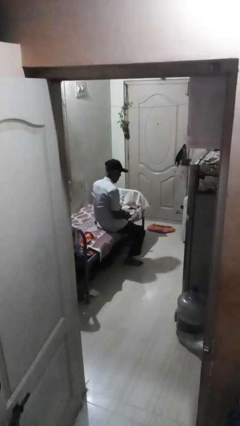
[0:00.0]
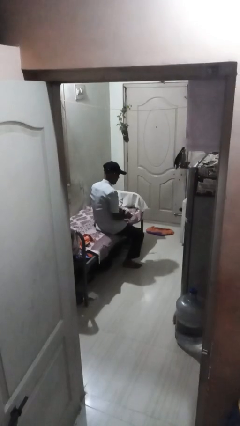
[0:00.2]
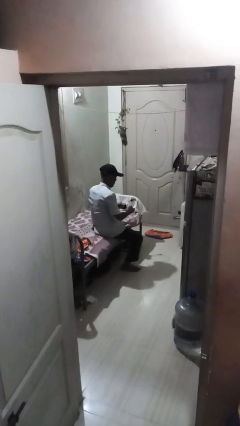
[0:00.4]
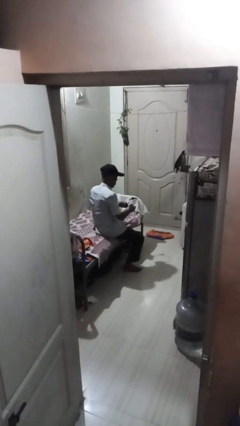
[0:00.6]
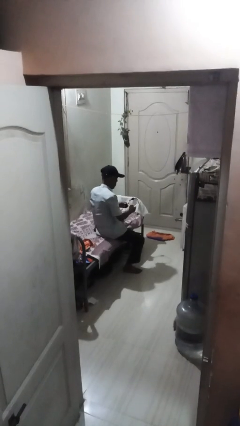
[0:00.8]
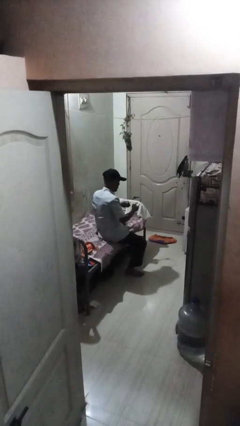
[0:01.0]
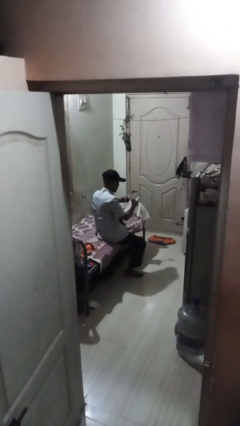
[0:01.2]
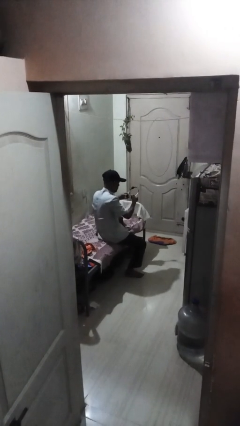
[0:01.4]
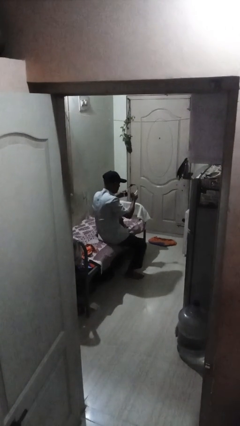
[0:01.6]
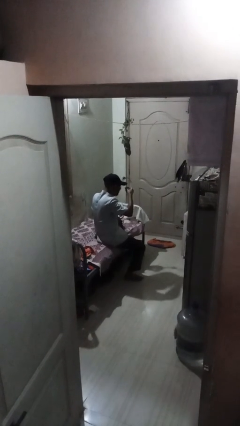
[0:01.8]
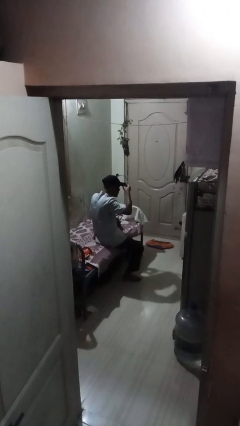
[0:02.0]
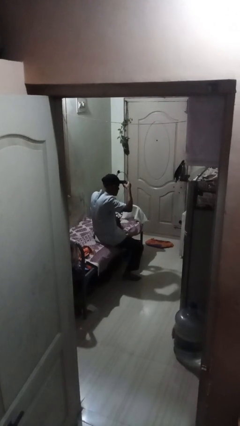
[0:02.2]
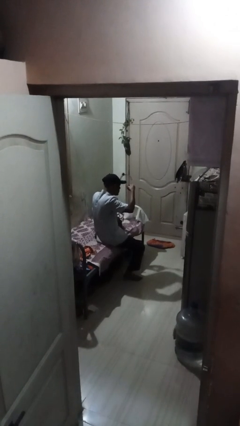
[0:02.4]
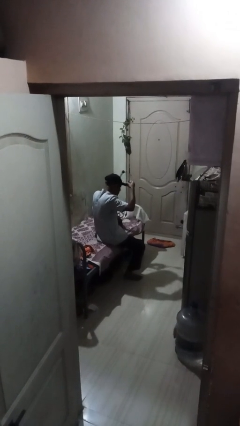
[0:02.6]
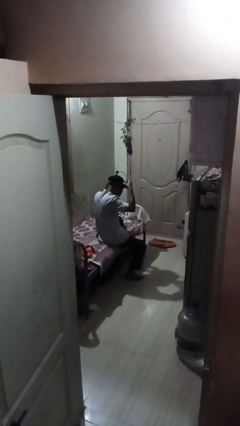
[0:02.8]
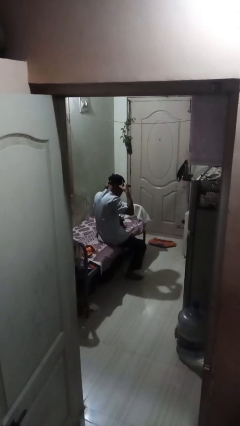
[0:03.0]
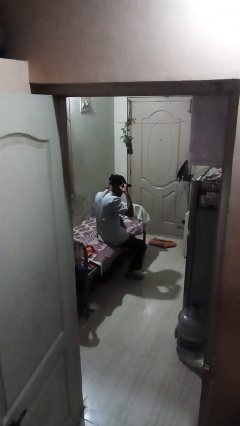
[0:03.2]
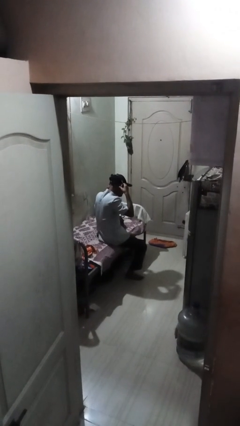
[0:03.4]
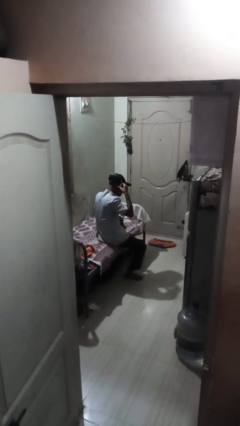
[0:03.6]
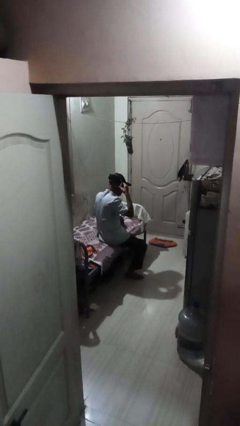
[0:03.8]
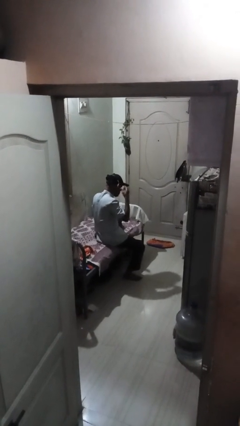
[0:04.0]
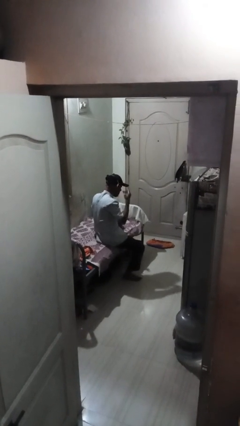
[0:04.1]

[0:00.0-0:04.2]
person puts on headphones

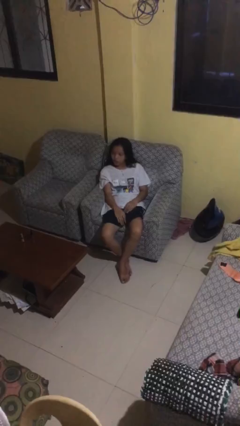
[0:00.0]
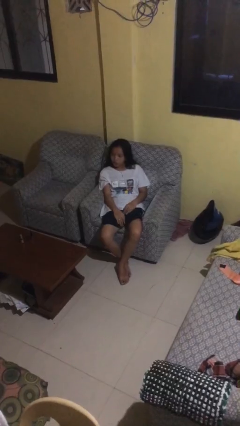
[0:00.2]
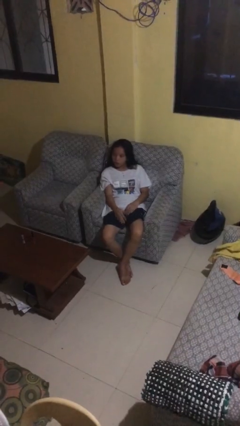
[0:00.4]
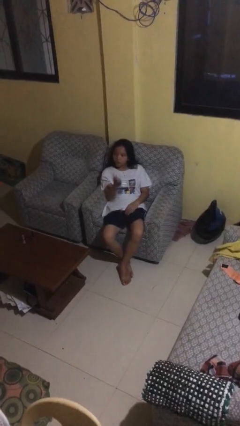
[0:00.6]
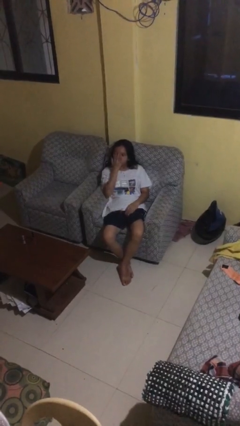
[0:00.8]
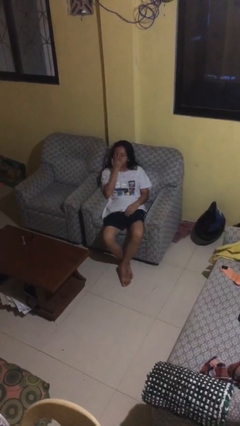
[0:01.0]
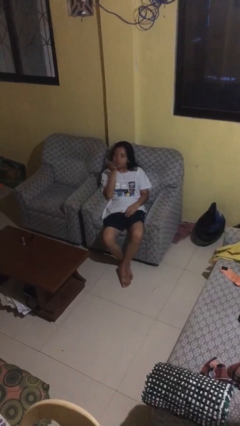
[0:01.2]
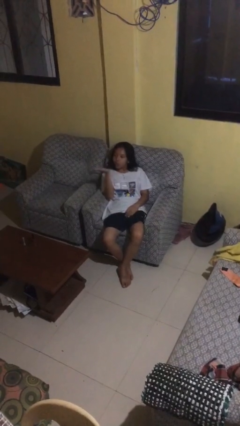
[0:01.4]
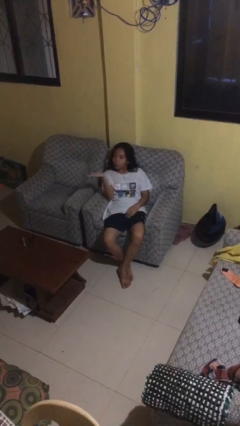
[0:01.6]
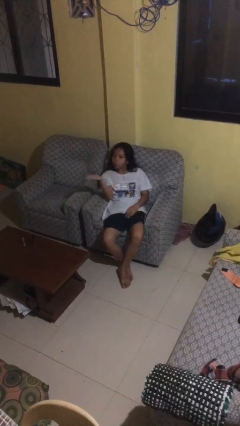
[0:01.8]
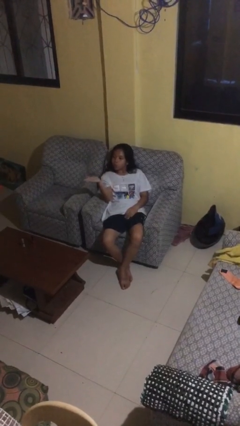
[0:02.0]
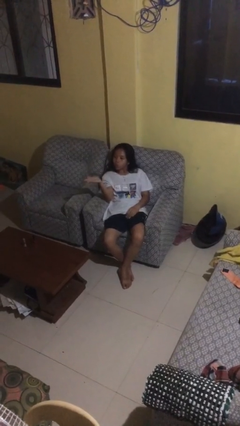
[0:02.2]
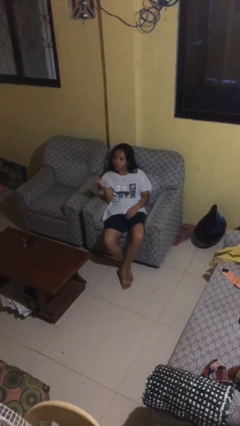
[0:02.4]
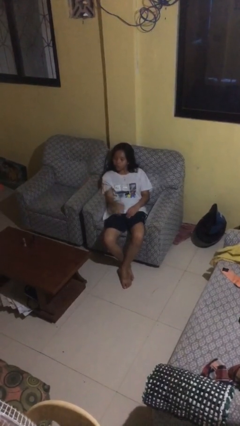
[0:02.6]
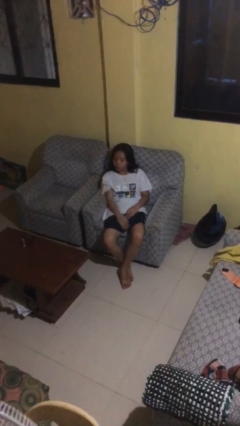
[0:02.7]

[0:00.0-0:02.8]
person gestures blow kiss

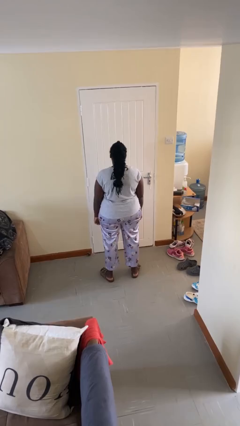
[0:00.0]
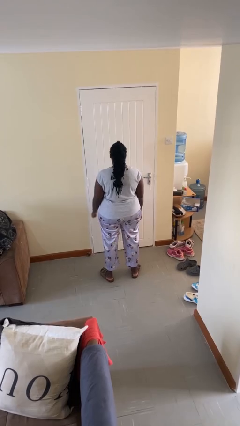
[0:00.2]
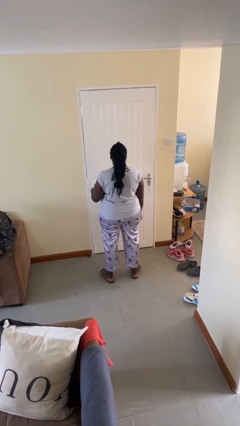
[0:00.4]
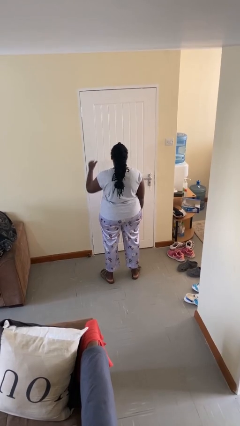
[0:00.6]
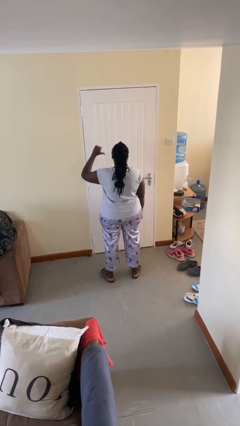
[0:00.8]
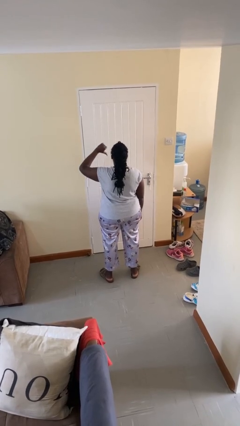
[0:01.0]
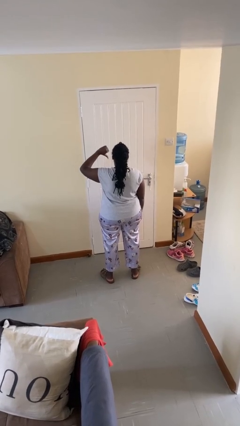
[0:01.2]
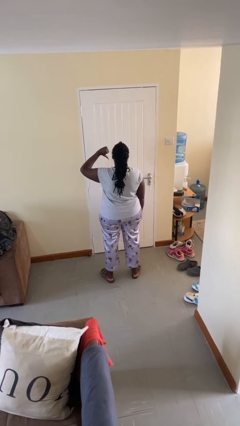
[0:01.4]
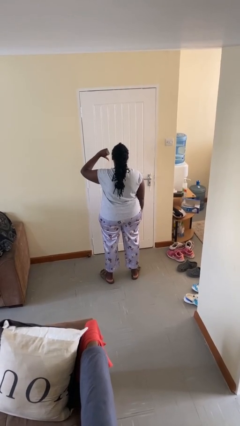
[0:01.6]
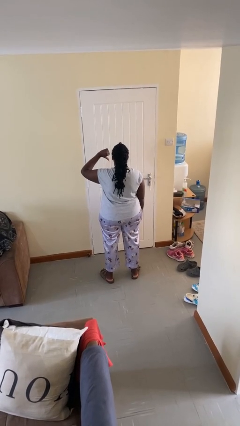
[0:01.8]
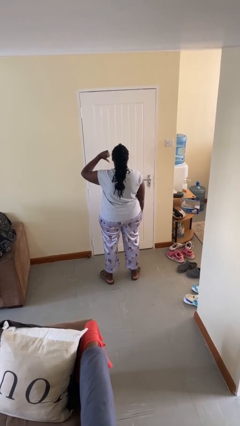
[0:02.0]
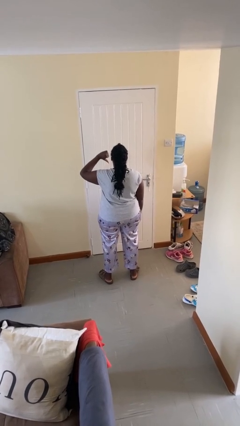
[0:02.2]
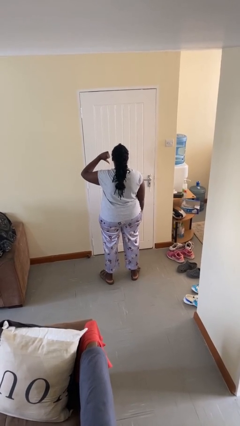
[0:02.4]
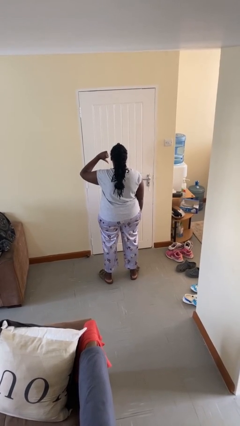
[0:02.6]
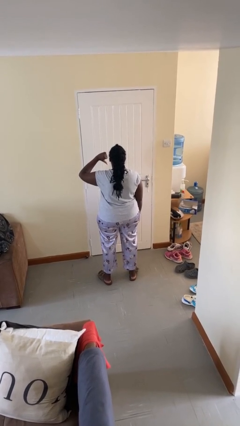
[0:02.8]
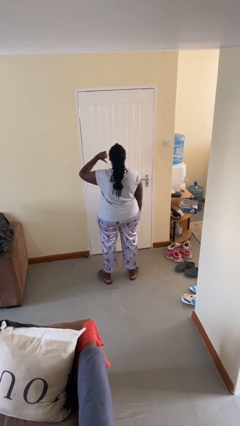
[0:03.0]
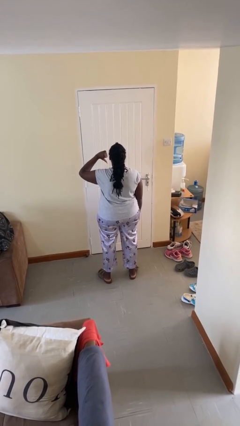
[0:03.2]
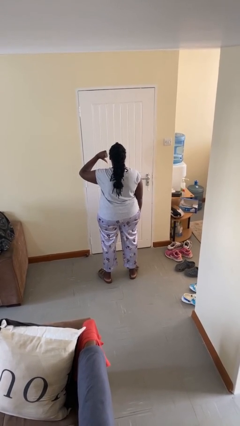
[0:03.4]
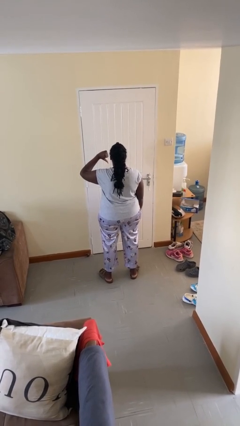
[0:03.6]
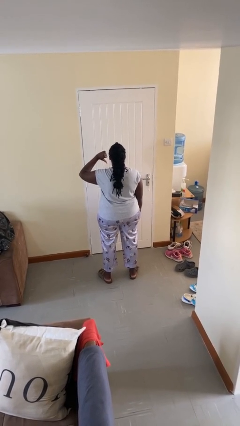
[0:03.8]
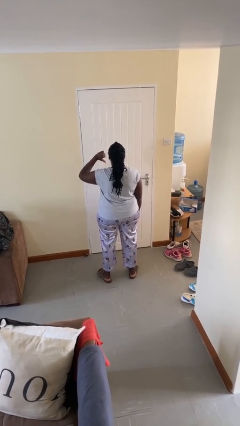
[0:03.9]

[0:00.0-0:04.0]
person gestures thumbs down

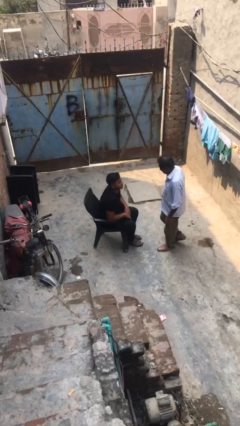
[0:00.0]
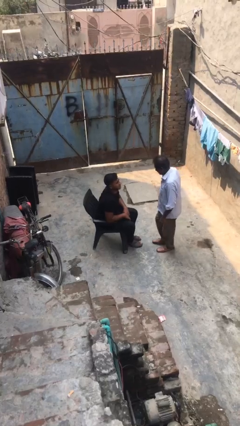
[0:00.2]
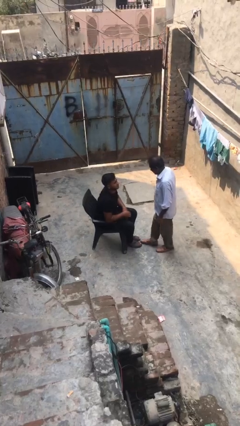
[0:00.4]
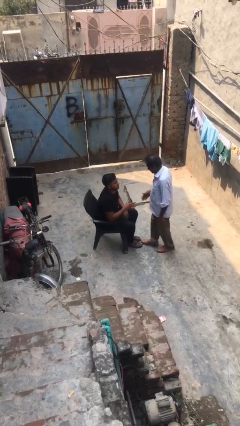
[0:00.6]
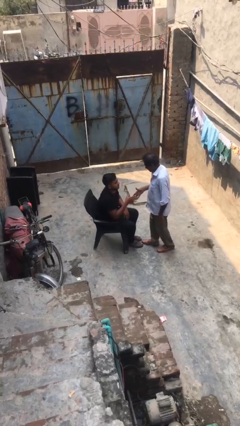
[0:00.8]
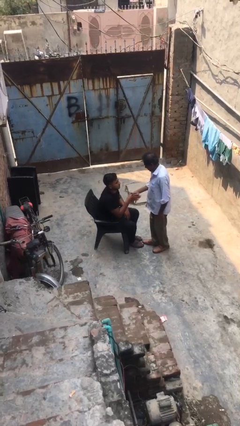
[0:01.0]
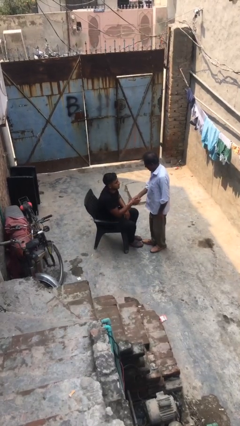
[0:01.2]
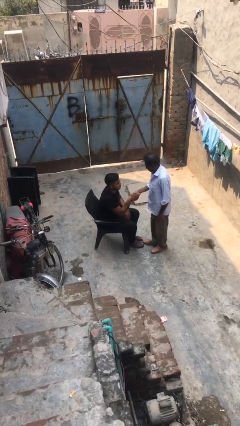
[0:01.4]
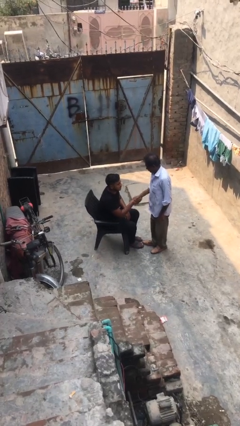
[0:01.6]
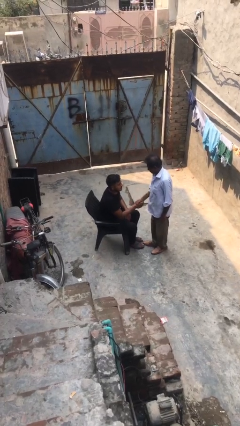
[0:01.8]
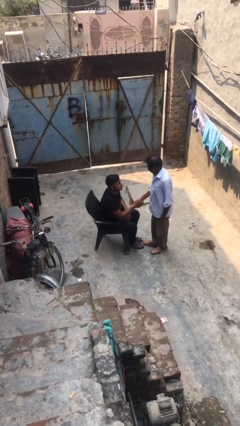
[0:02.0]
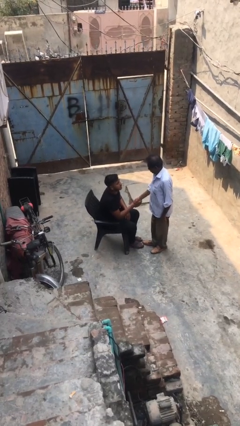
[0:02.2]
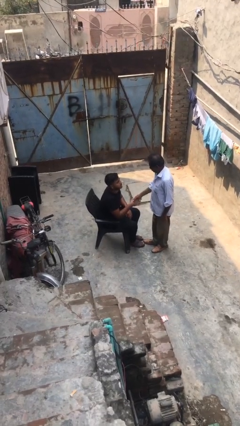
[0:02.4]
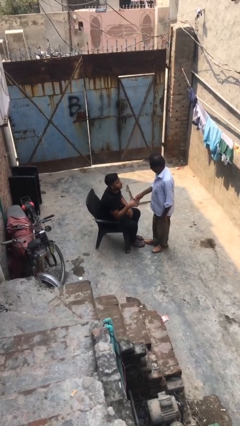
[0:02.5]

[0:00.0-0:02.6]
person shakes hand

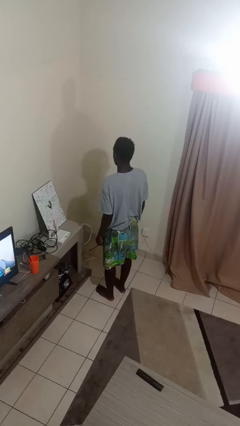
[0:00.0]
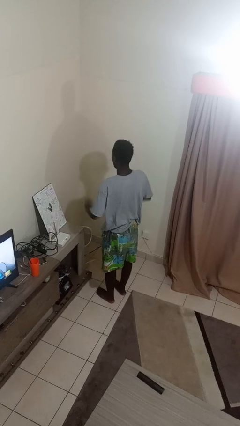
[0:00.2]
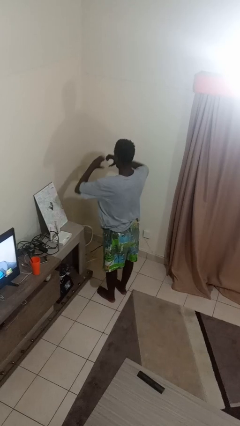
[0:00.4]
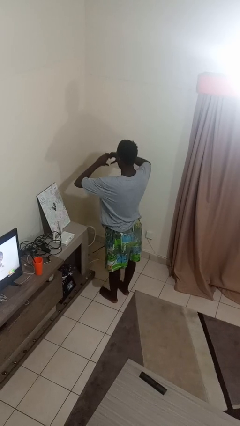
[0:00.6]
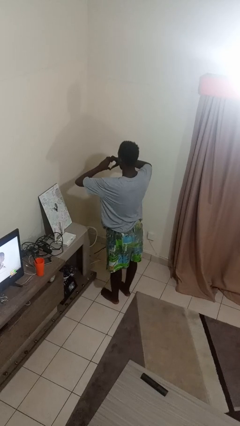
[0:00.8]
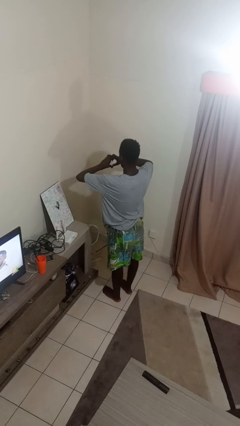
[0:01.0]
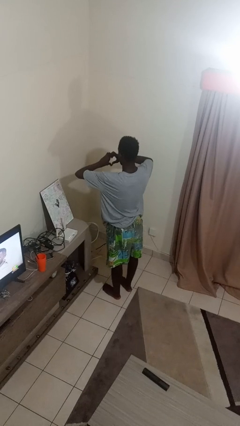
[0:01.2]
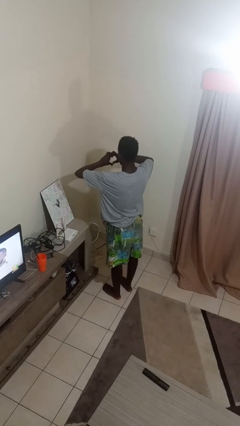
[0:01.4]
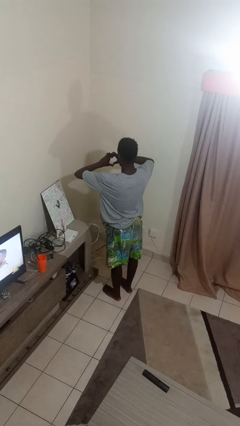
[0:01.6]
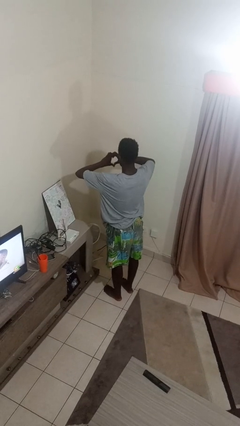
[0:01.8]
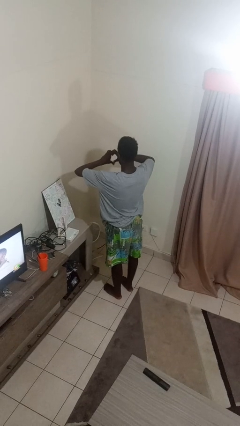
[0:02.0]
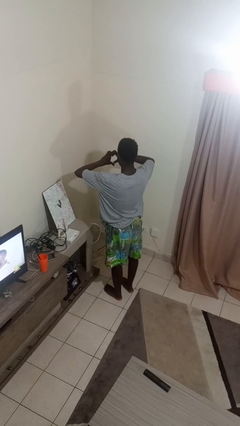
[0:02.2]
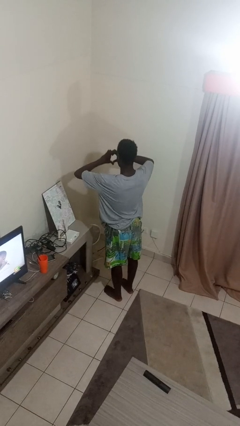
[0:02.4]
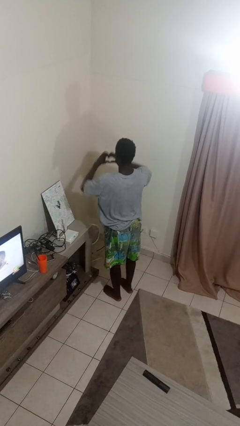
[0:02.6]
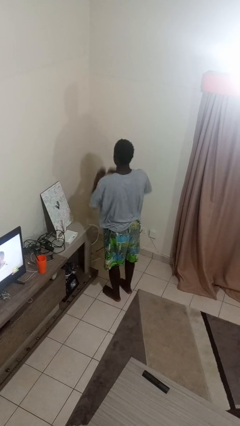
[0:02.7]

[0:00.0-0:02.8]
person gestures heart

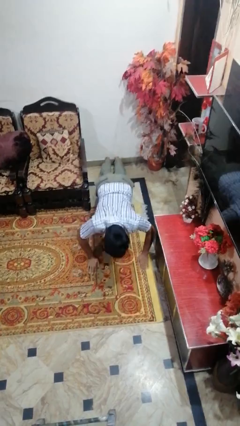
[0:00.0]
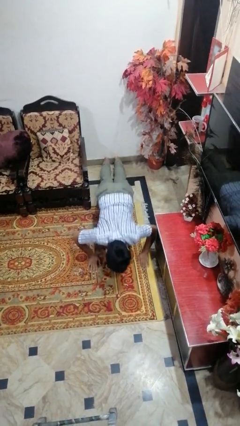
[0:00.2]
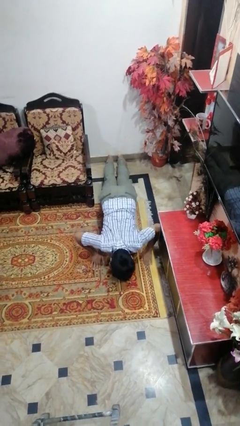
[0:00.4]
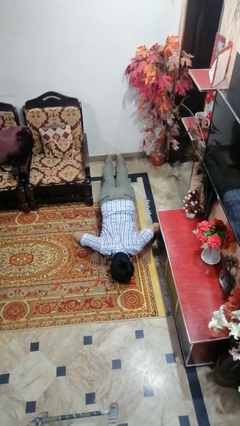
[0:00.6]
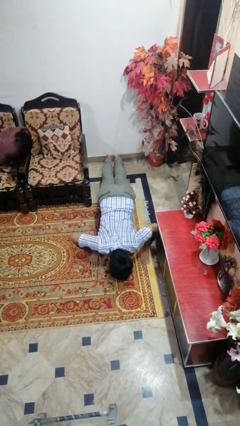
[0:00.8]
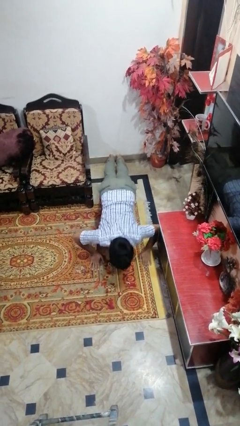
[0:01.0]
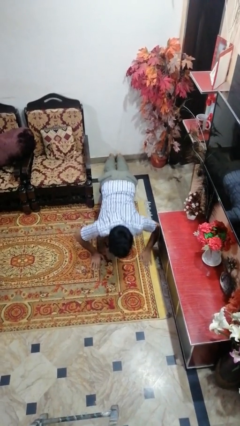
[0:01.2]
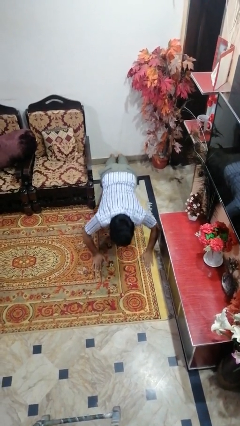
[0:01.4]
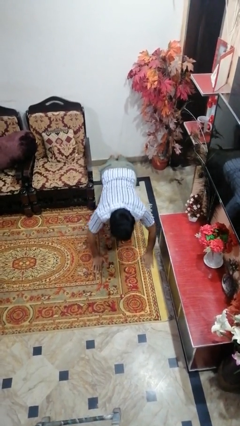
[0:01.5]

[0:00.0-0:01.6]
person exercises with pushup
